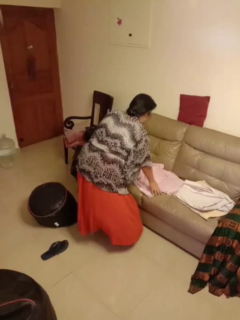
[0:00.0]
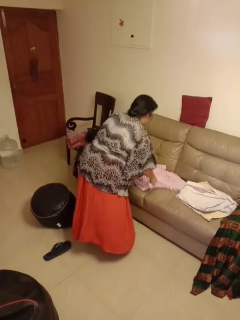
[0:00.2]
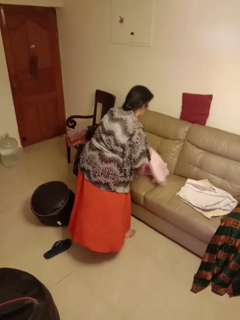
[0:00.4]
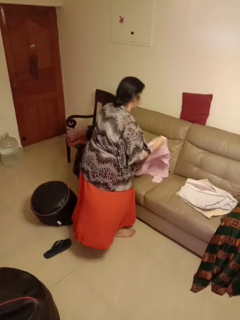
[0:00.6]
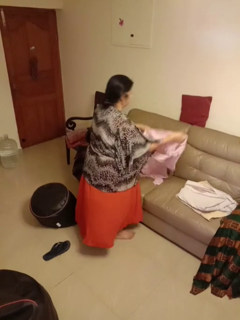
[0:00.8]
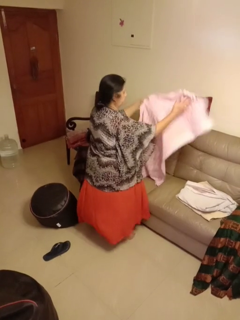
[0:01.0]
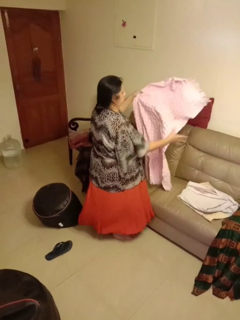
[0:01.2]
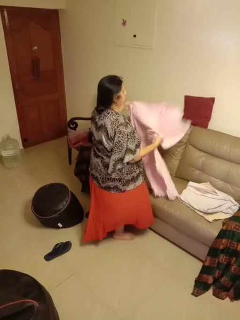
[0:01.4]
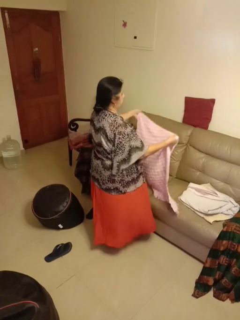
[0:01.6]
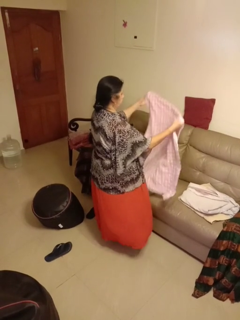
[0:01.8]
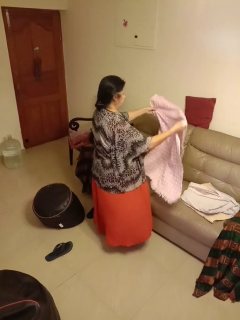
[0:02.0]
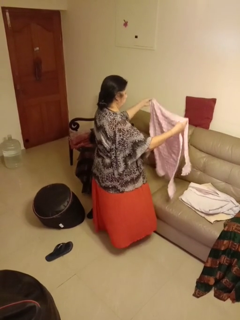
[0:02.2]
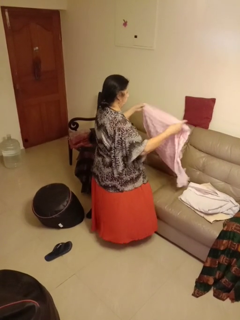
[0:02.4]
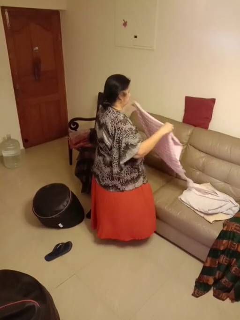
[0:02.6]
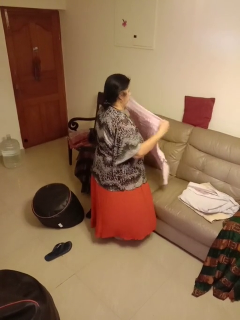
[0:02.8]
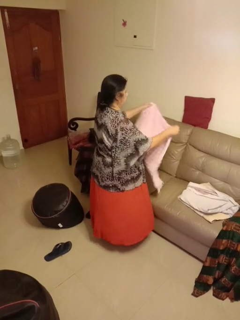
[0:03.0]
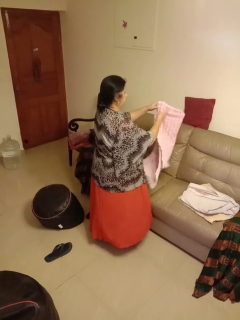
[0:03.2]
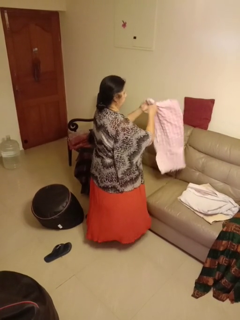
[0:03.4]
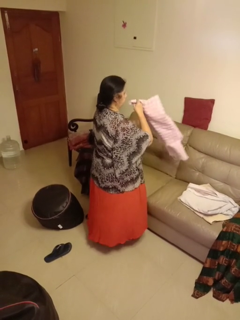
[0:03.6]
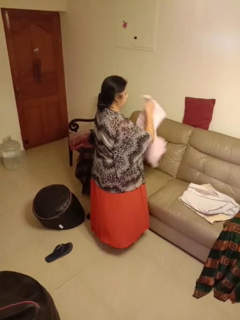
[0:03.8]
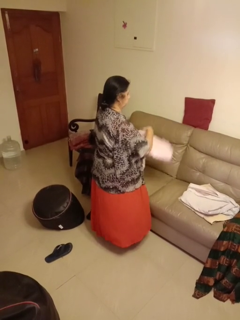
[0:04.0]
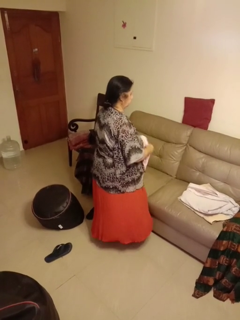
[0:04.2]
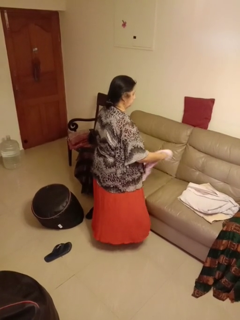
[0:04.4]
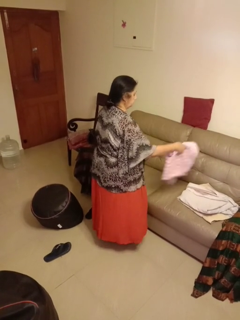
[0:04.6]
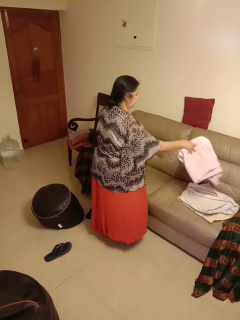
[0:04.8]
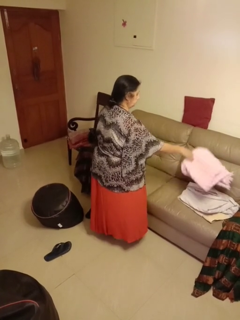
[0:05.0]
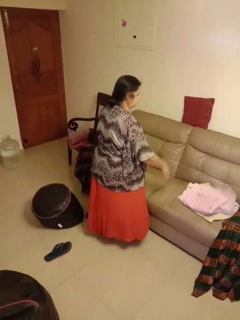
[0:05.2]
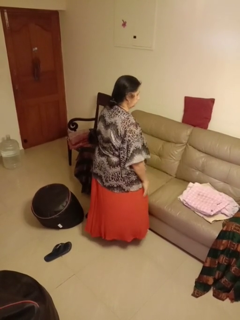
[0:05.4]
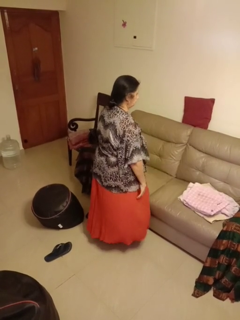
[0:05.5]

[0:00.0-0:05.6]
person folds towel

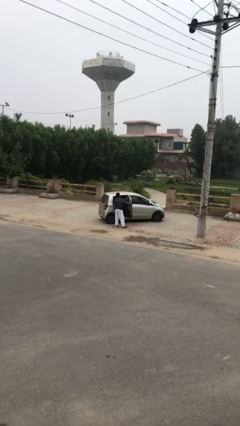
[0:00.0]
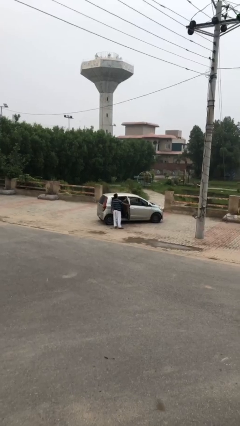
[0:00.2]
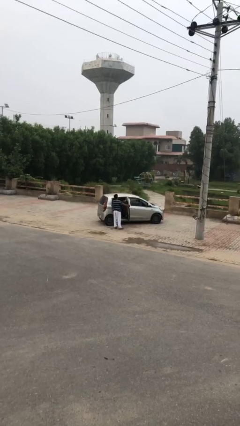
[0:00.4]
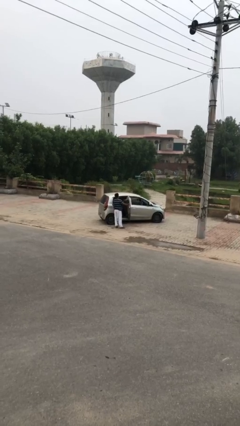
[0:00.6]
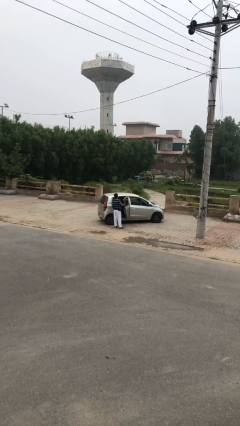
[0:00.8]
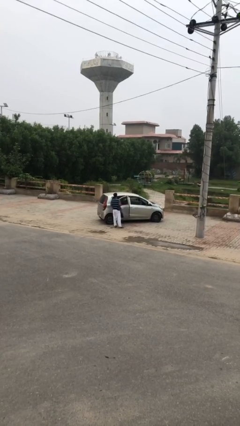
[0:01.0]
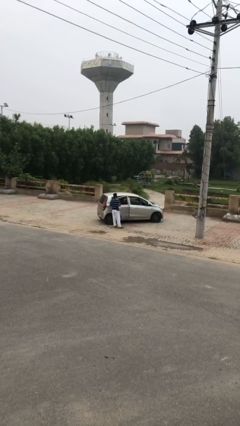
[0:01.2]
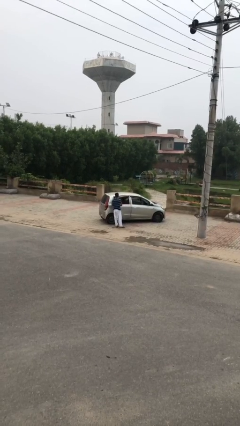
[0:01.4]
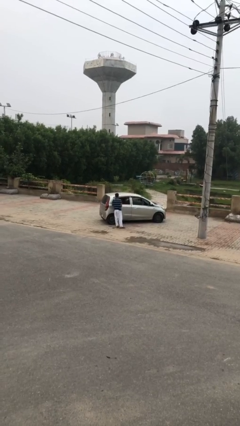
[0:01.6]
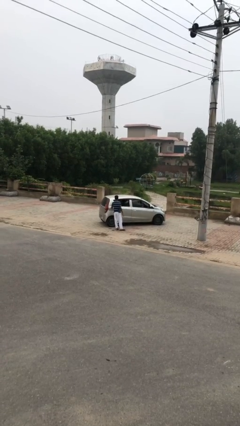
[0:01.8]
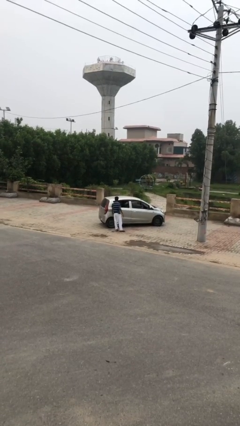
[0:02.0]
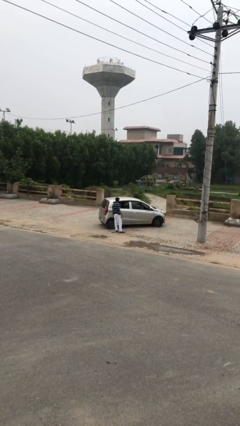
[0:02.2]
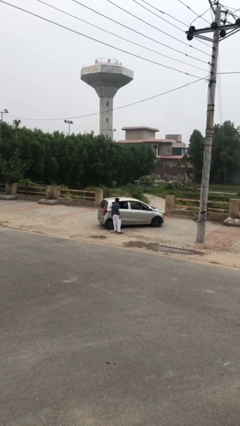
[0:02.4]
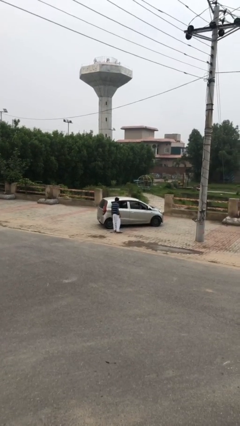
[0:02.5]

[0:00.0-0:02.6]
person closes car door

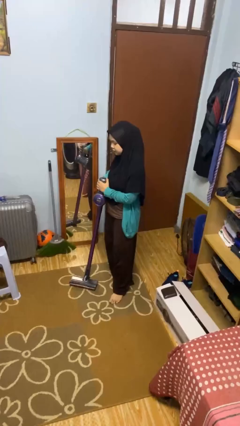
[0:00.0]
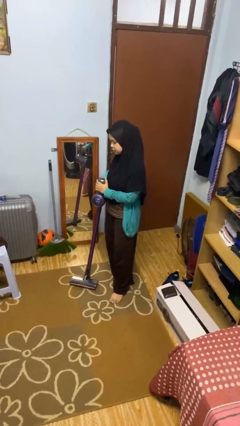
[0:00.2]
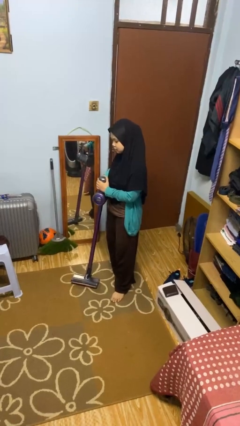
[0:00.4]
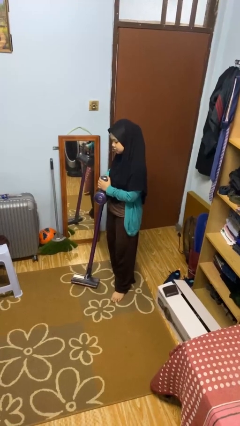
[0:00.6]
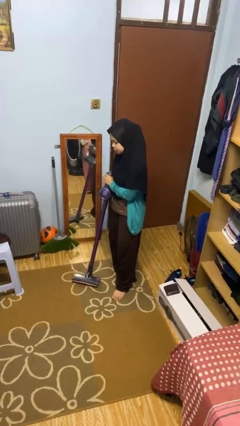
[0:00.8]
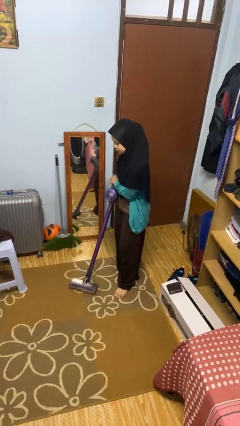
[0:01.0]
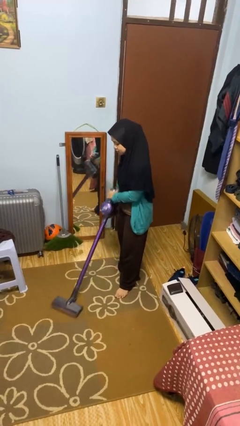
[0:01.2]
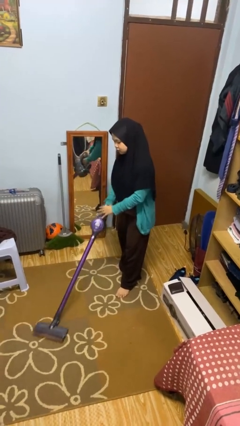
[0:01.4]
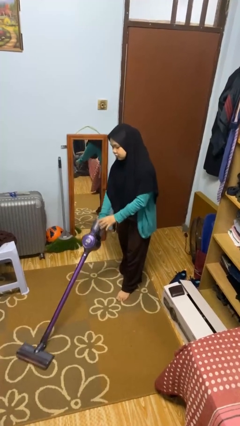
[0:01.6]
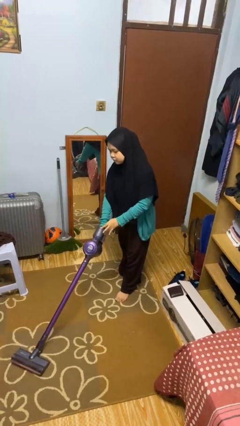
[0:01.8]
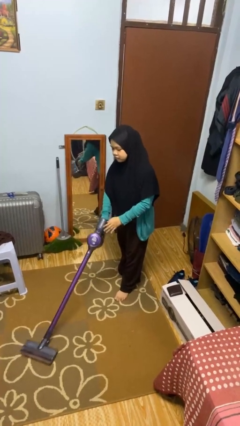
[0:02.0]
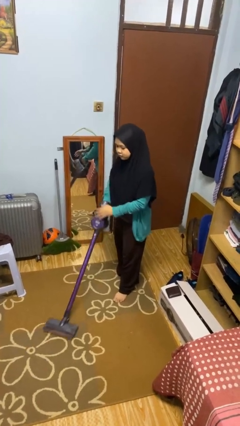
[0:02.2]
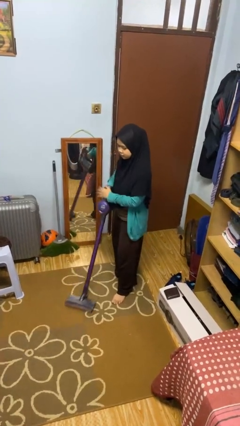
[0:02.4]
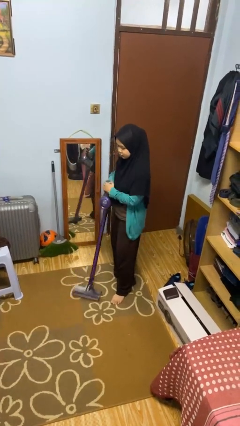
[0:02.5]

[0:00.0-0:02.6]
person vacuums carpet

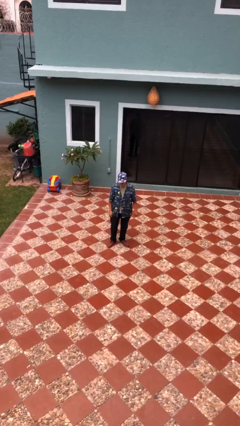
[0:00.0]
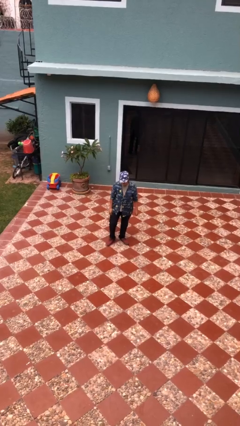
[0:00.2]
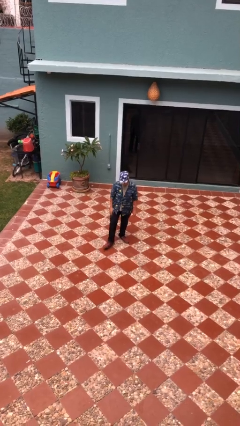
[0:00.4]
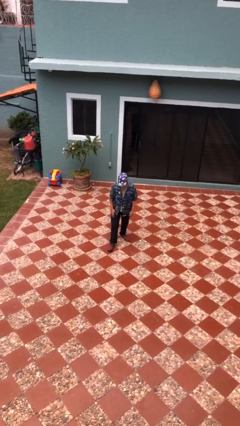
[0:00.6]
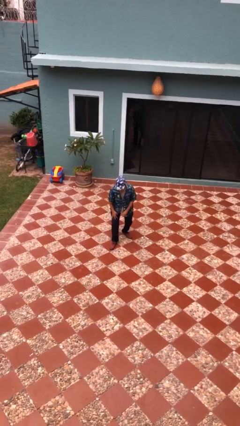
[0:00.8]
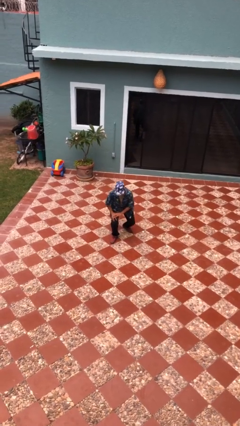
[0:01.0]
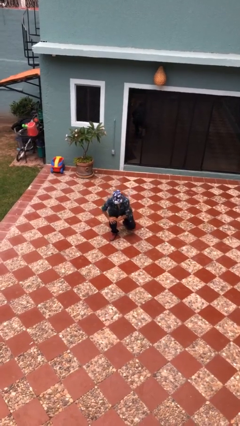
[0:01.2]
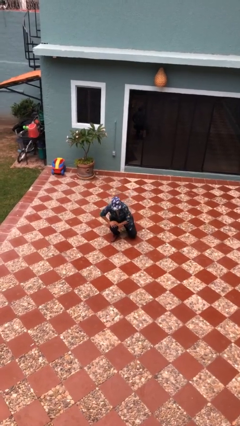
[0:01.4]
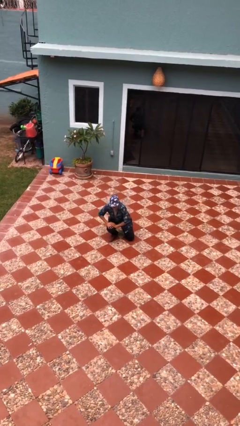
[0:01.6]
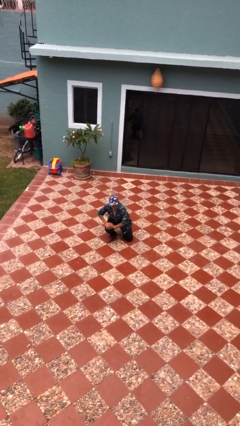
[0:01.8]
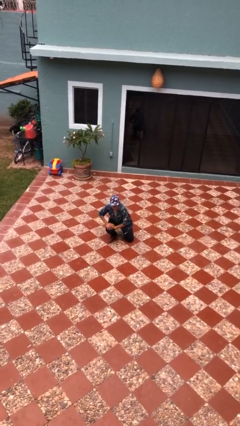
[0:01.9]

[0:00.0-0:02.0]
person kneels

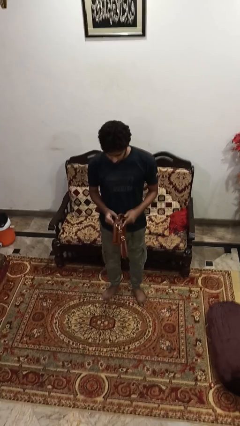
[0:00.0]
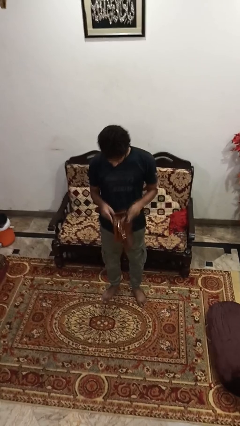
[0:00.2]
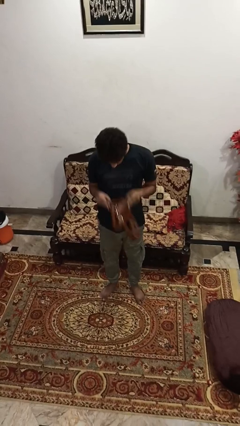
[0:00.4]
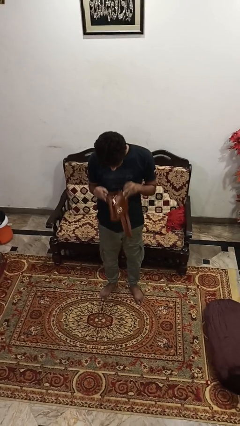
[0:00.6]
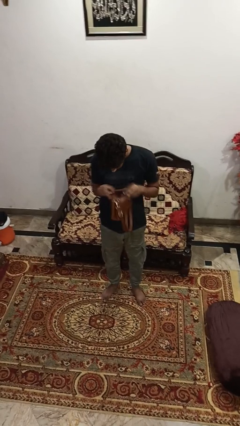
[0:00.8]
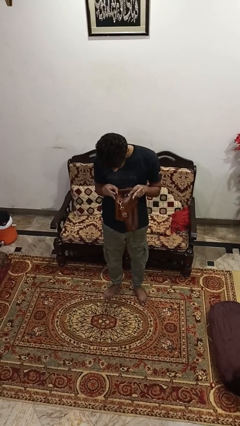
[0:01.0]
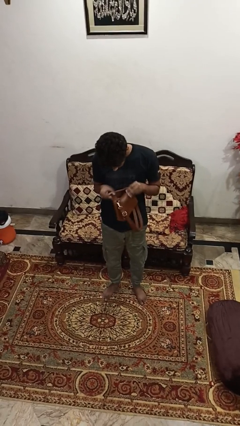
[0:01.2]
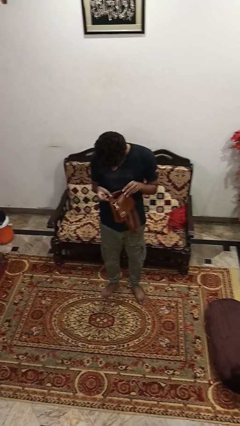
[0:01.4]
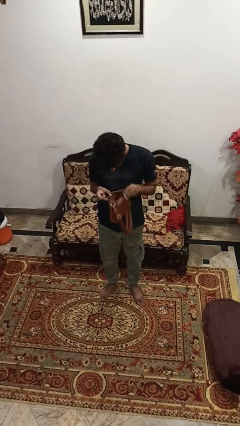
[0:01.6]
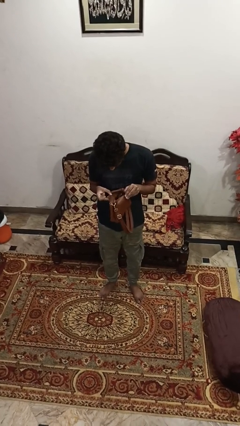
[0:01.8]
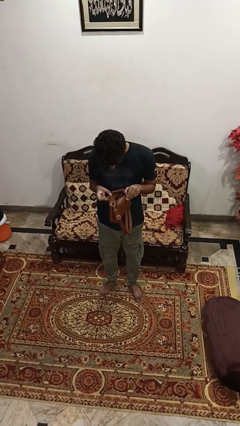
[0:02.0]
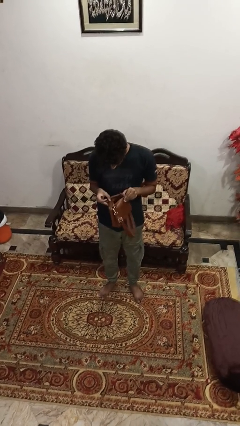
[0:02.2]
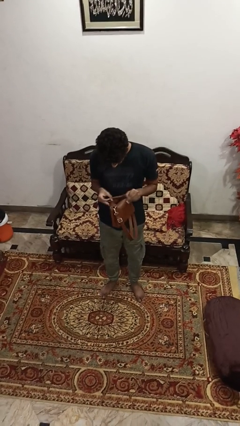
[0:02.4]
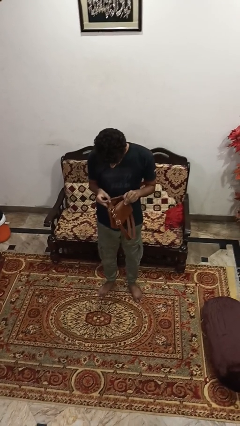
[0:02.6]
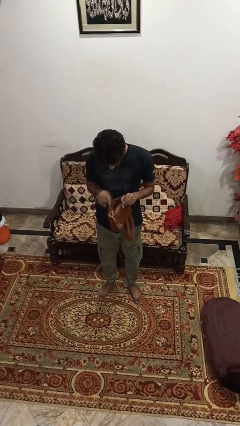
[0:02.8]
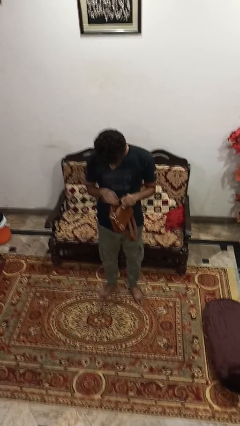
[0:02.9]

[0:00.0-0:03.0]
person searches in purse

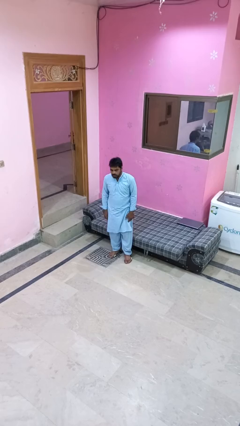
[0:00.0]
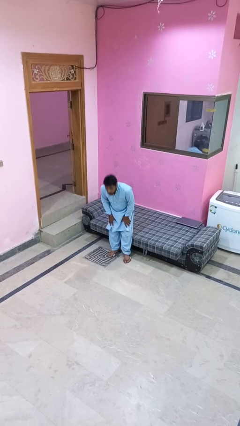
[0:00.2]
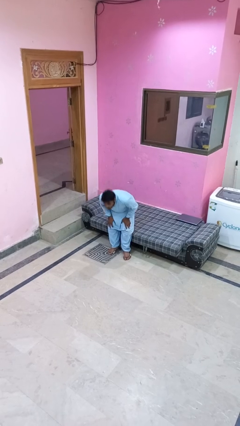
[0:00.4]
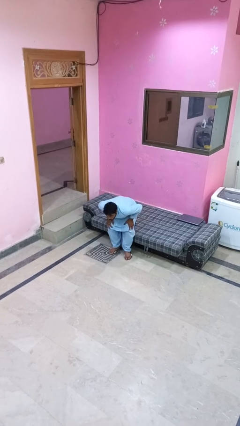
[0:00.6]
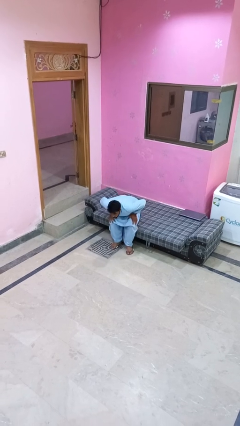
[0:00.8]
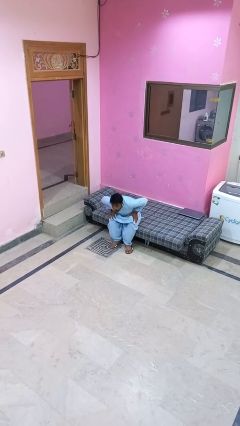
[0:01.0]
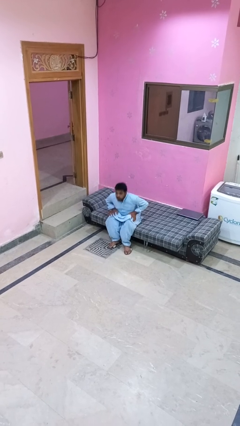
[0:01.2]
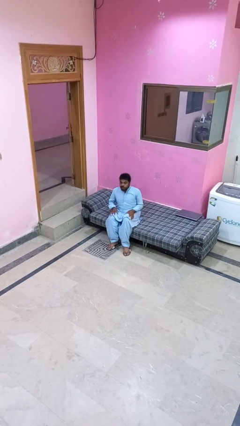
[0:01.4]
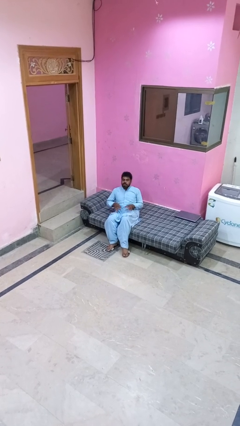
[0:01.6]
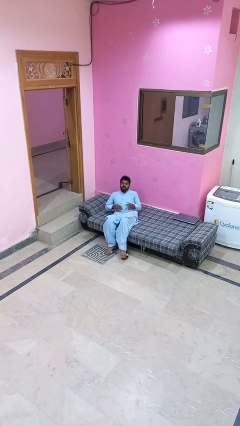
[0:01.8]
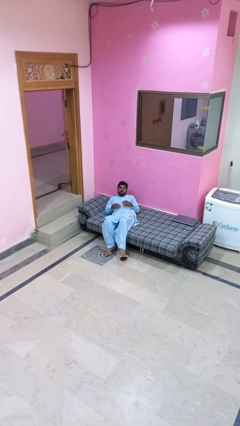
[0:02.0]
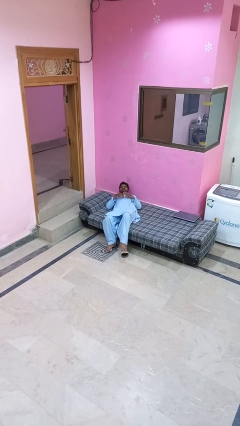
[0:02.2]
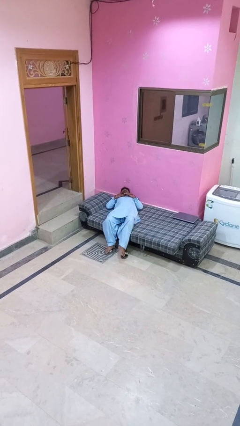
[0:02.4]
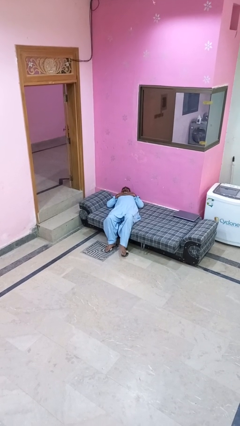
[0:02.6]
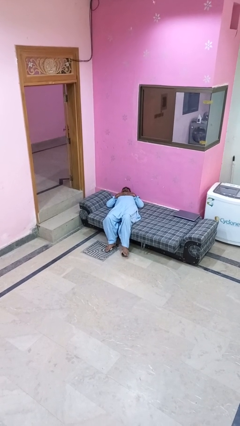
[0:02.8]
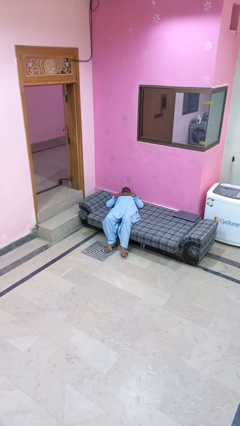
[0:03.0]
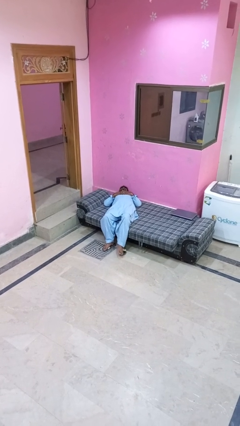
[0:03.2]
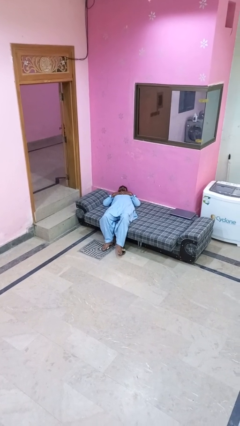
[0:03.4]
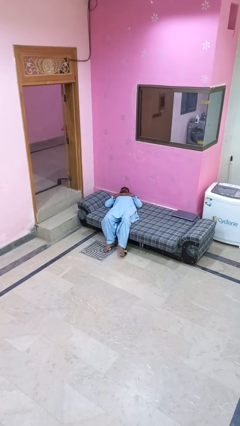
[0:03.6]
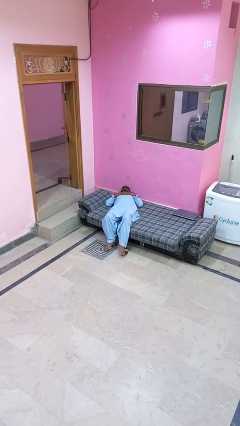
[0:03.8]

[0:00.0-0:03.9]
person lies down on bed
